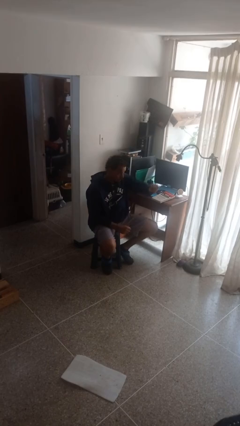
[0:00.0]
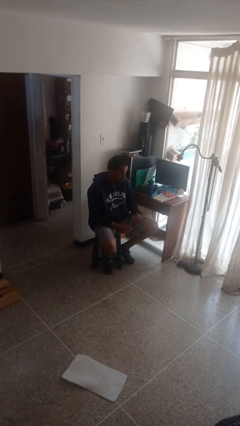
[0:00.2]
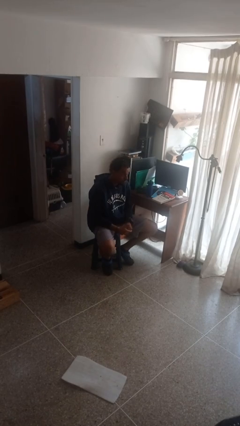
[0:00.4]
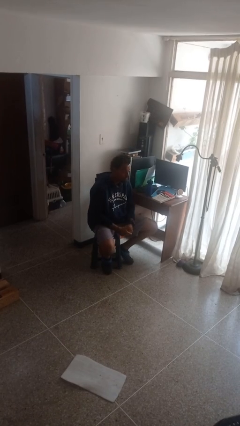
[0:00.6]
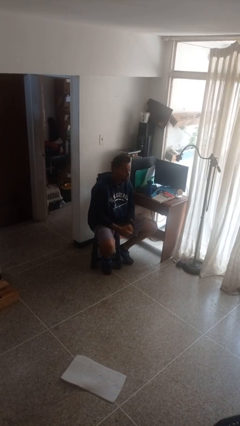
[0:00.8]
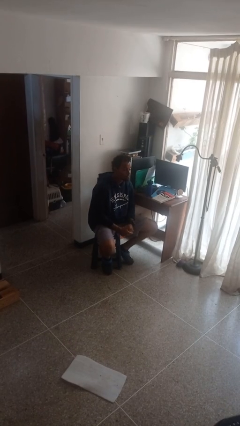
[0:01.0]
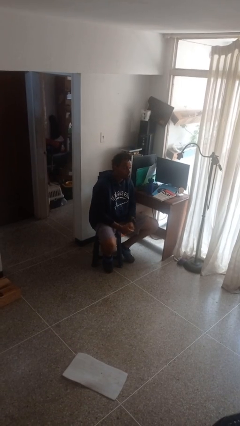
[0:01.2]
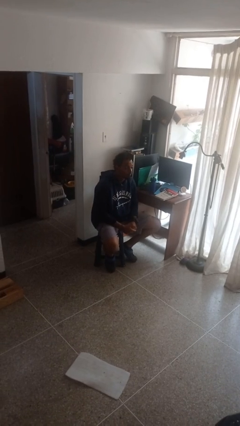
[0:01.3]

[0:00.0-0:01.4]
person gestures lower hand

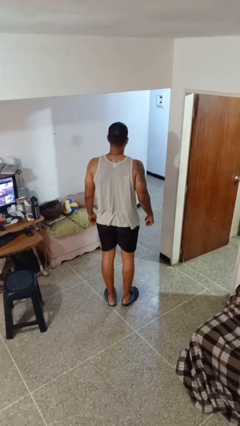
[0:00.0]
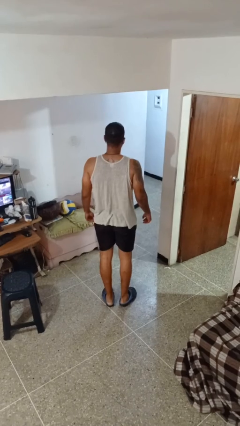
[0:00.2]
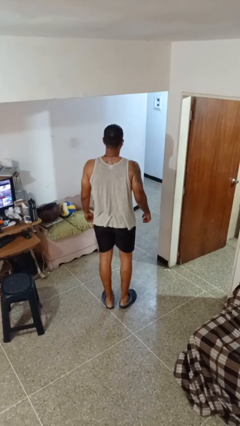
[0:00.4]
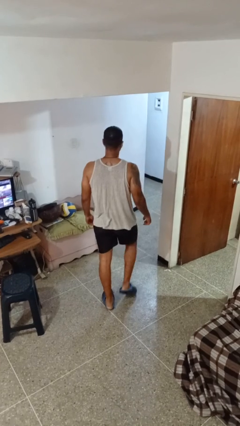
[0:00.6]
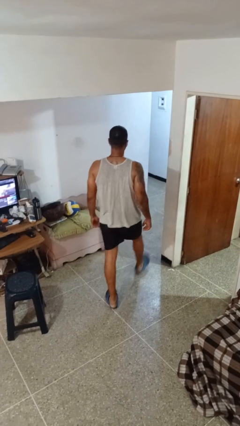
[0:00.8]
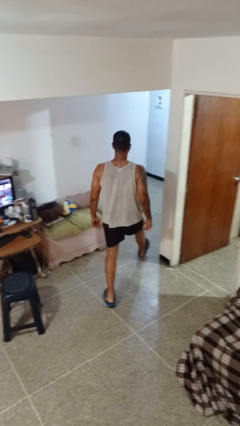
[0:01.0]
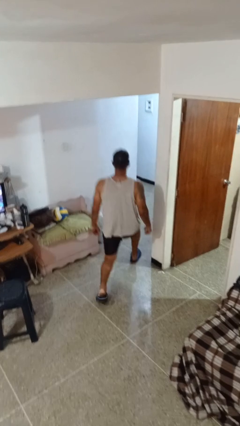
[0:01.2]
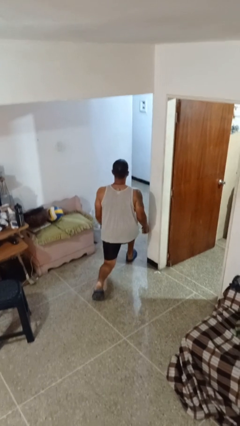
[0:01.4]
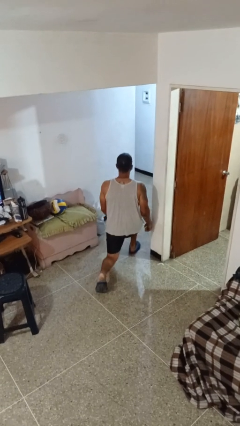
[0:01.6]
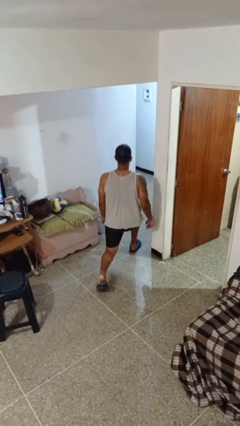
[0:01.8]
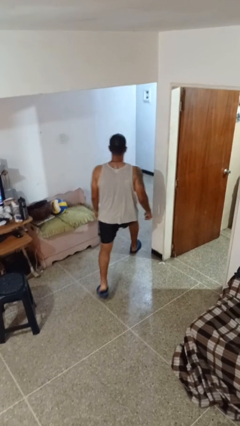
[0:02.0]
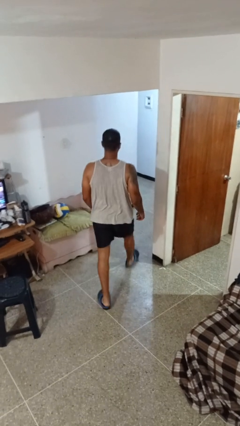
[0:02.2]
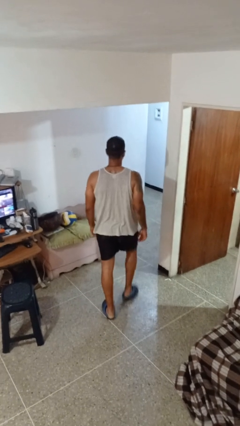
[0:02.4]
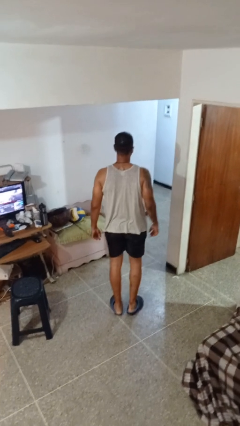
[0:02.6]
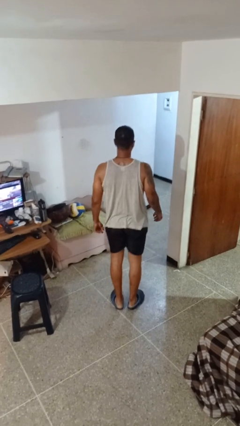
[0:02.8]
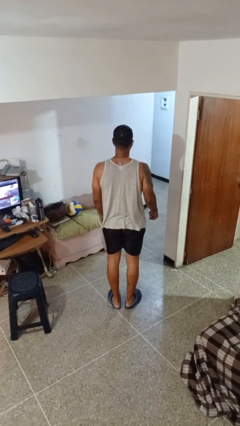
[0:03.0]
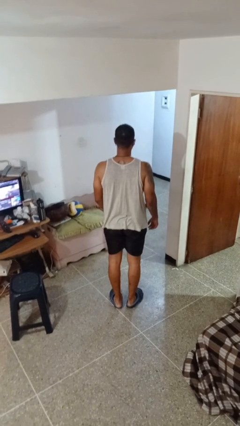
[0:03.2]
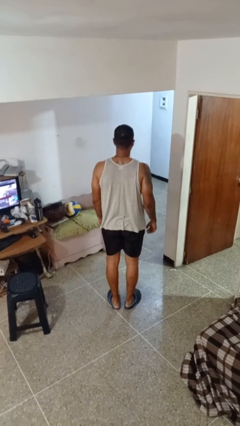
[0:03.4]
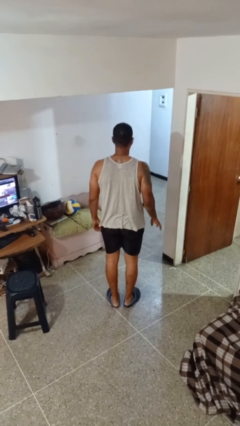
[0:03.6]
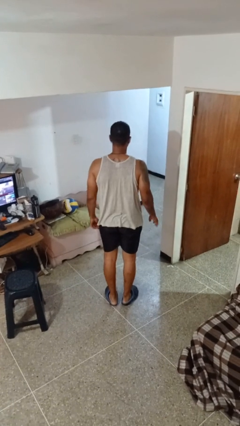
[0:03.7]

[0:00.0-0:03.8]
person exercises with lunges

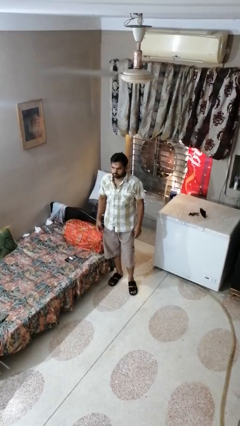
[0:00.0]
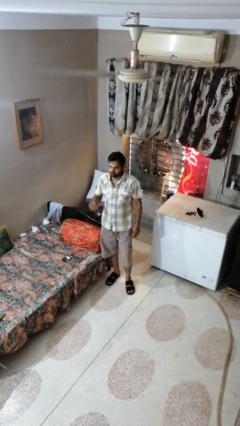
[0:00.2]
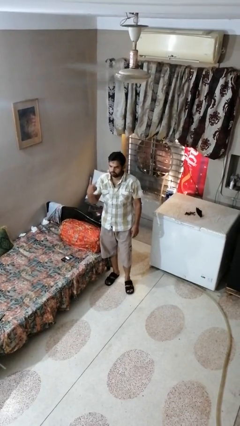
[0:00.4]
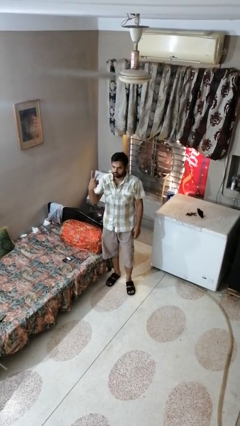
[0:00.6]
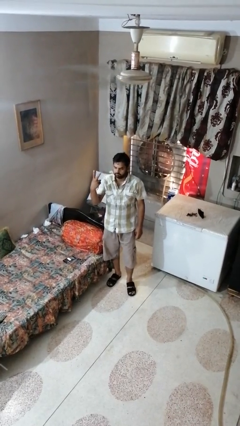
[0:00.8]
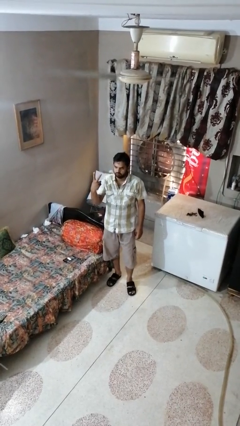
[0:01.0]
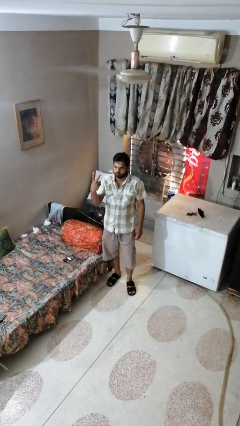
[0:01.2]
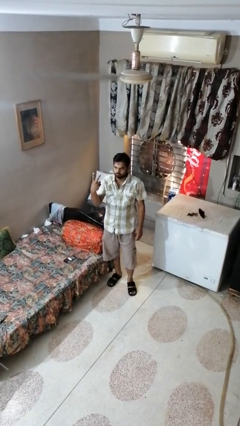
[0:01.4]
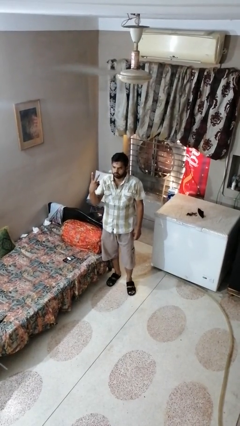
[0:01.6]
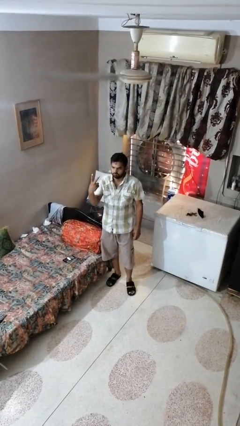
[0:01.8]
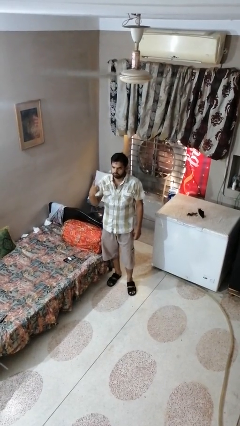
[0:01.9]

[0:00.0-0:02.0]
person gestures peace

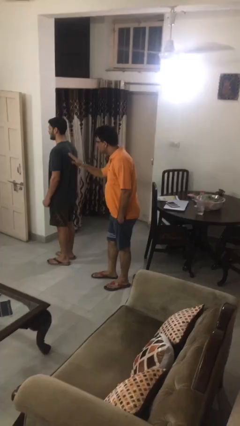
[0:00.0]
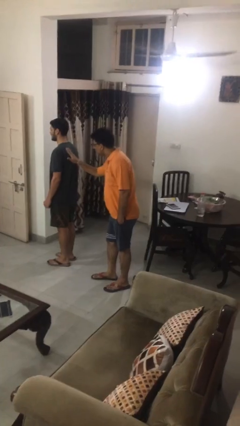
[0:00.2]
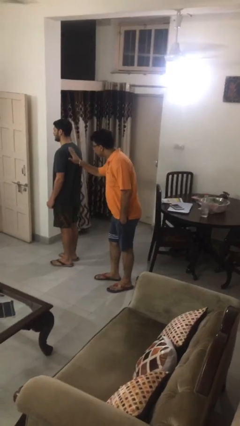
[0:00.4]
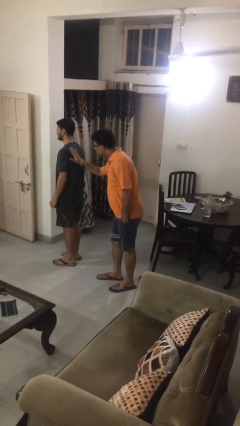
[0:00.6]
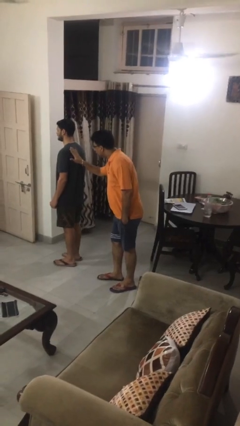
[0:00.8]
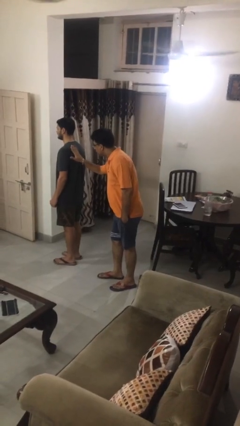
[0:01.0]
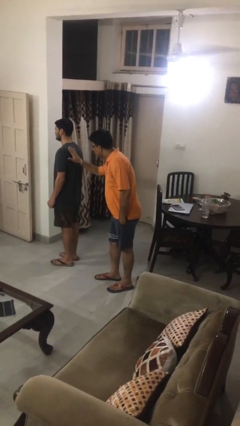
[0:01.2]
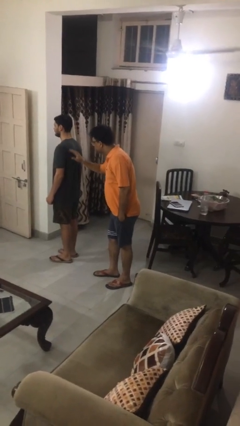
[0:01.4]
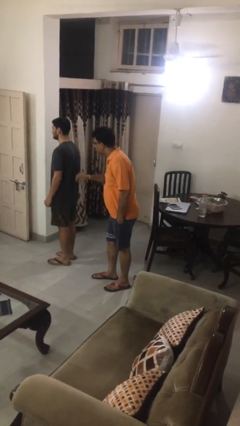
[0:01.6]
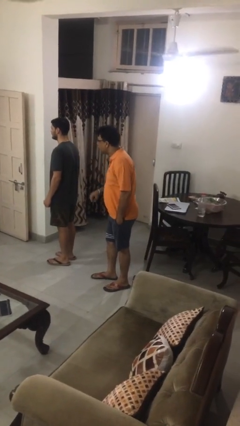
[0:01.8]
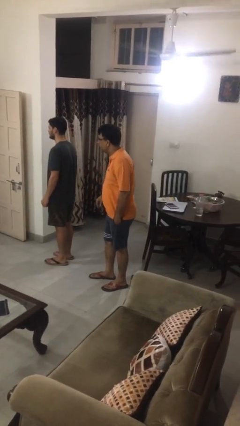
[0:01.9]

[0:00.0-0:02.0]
person touches back of person

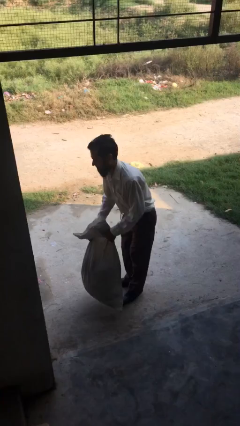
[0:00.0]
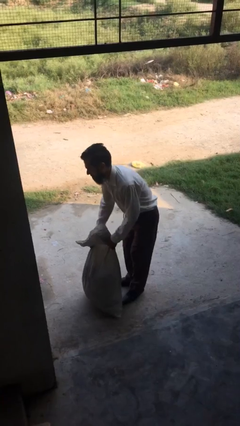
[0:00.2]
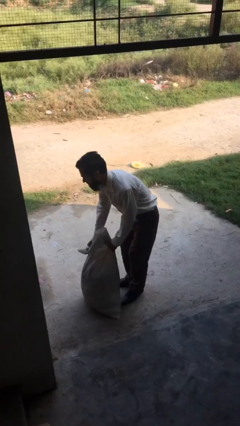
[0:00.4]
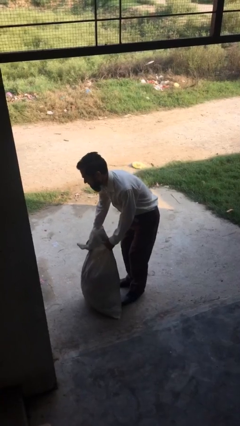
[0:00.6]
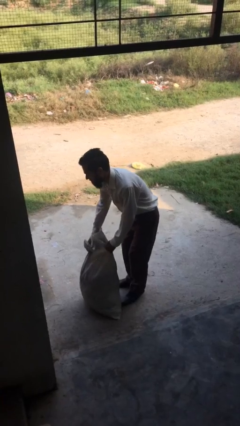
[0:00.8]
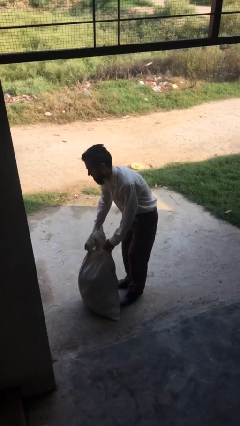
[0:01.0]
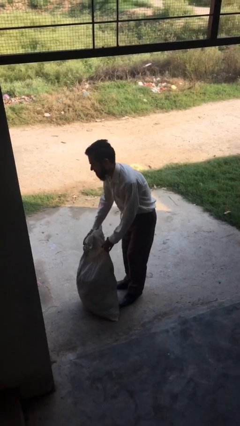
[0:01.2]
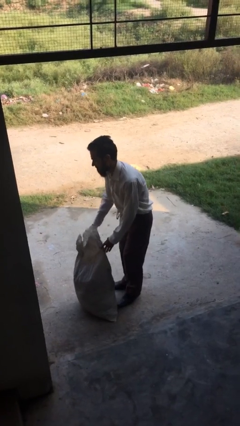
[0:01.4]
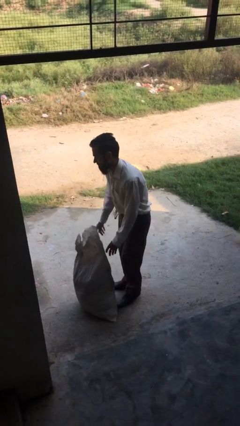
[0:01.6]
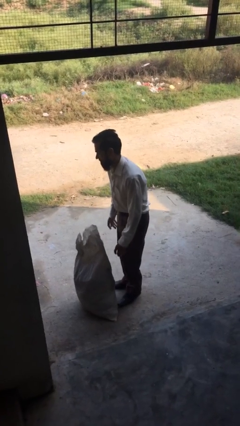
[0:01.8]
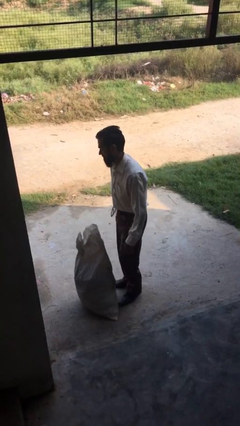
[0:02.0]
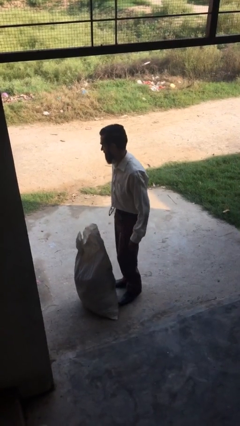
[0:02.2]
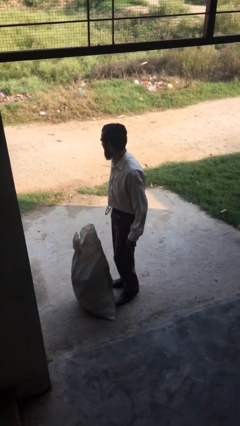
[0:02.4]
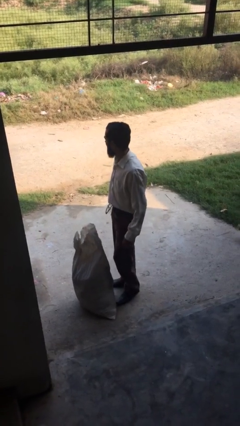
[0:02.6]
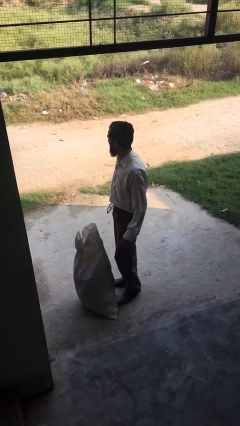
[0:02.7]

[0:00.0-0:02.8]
person puts down object on floor

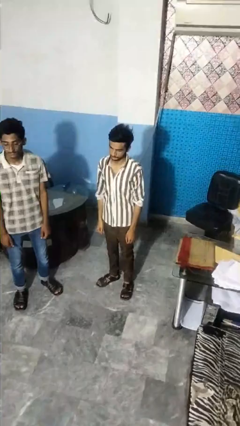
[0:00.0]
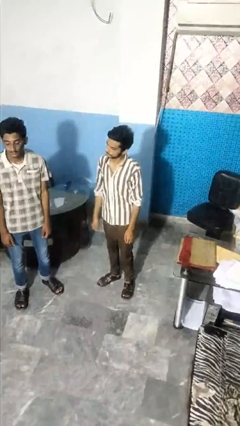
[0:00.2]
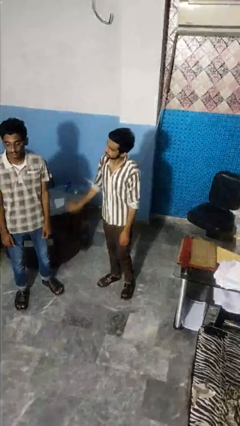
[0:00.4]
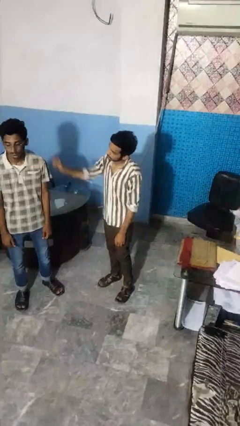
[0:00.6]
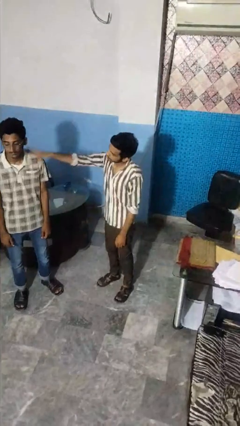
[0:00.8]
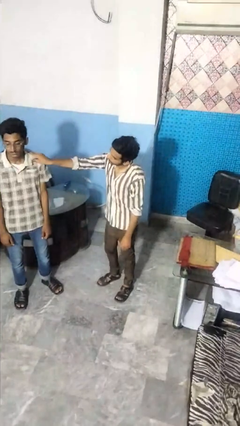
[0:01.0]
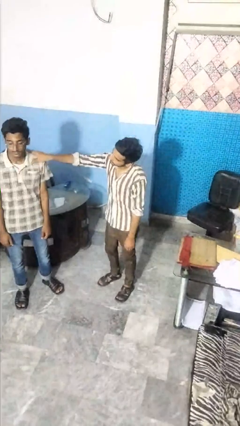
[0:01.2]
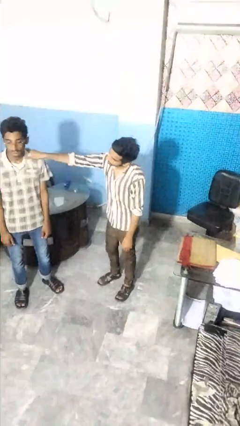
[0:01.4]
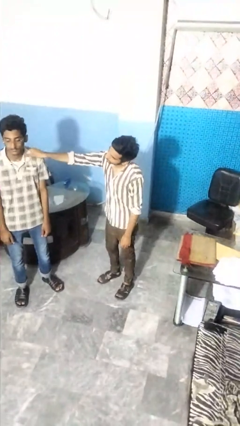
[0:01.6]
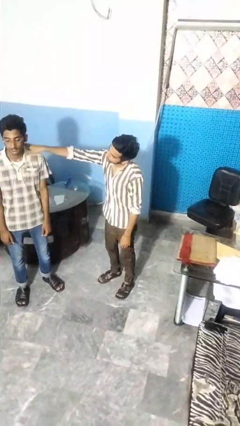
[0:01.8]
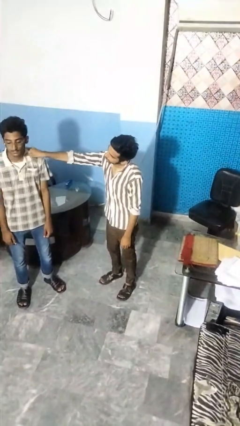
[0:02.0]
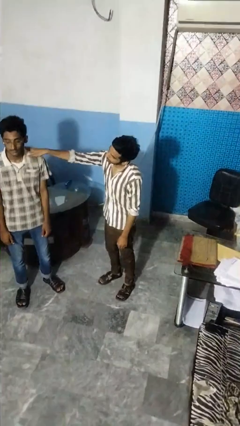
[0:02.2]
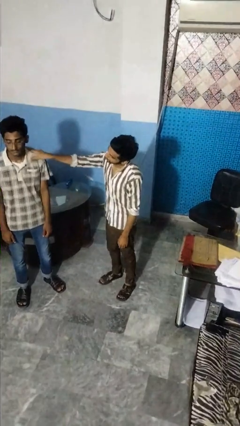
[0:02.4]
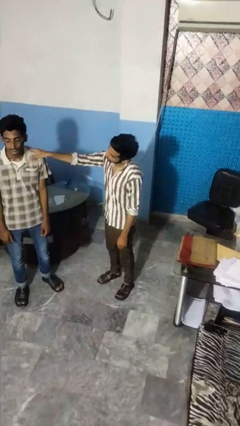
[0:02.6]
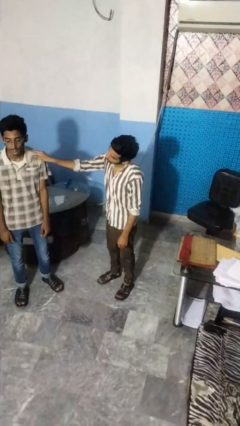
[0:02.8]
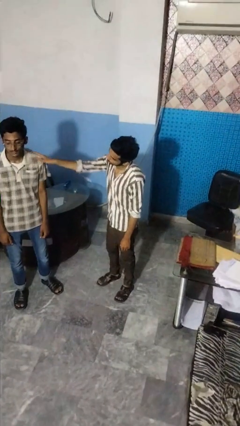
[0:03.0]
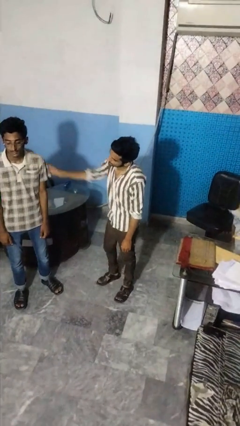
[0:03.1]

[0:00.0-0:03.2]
person pounds shoulders of person

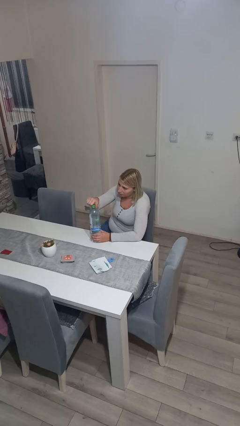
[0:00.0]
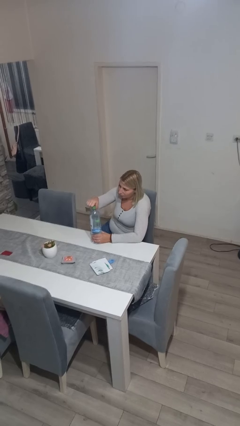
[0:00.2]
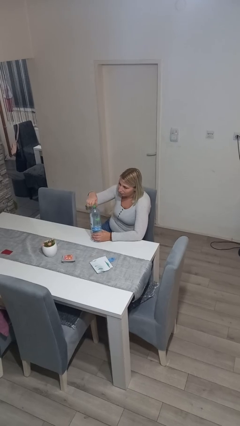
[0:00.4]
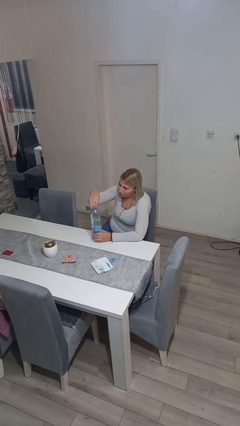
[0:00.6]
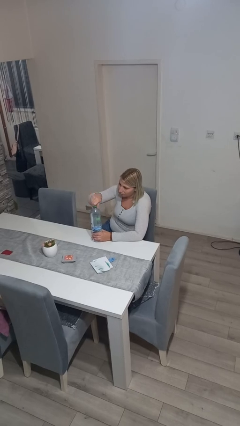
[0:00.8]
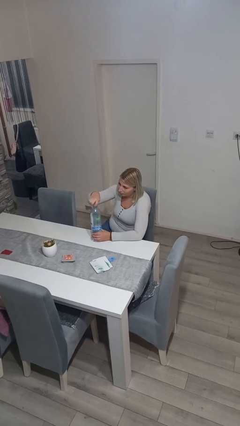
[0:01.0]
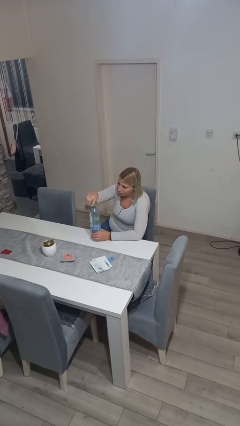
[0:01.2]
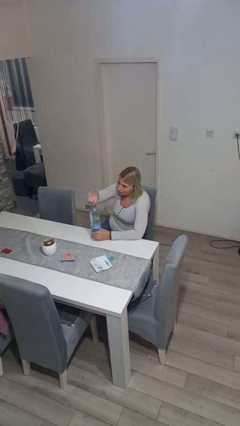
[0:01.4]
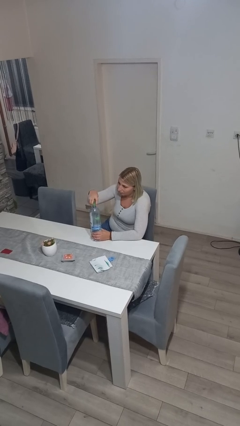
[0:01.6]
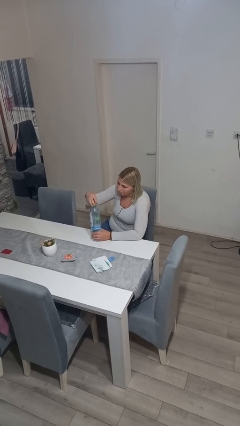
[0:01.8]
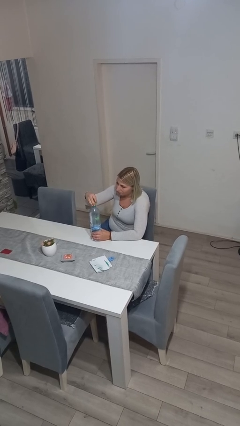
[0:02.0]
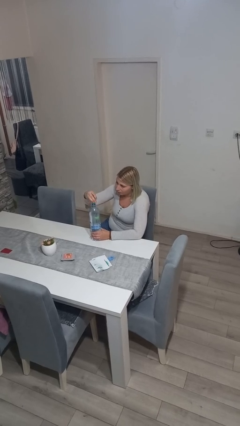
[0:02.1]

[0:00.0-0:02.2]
person unscrews lid from bottle
